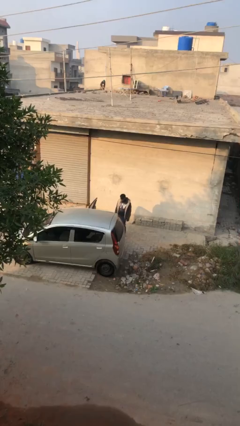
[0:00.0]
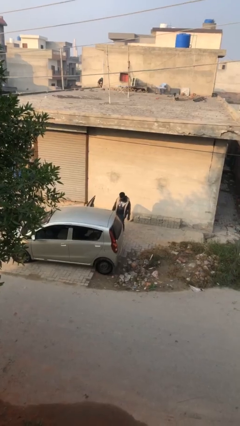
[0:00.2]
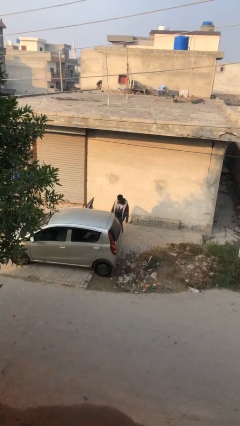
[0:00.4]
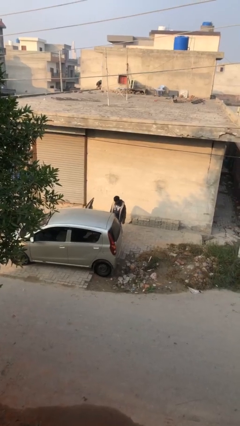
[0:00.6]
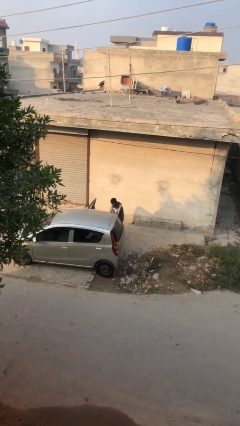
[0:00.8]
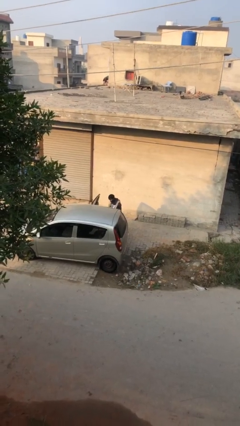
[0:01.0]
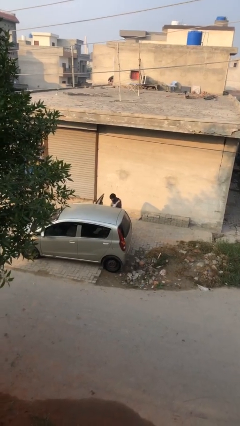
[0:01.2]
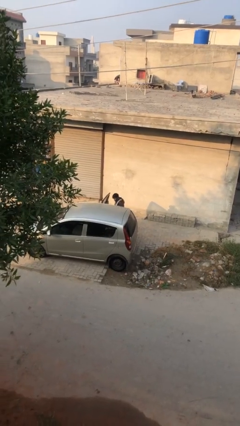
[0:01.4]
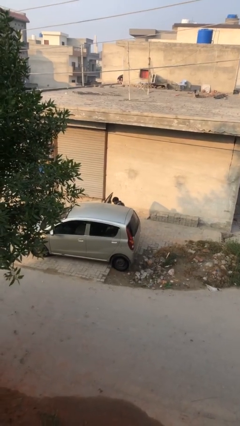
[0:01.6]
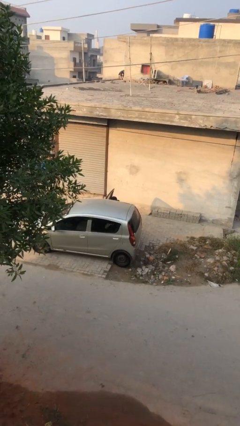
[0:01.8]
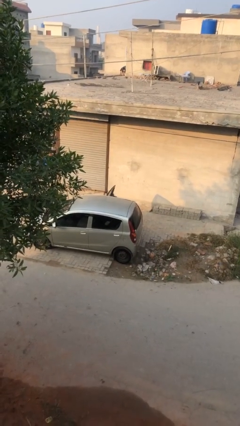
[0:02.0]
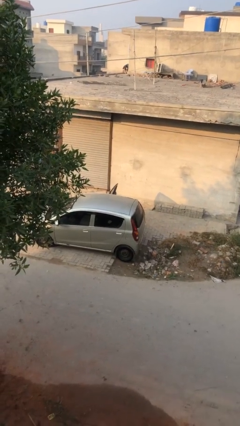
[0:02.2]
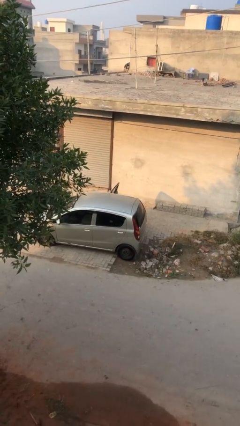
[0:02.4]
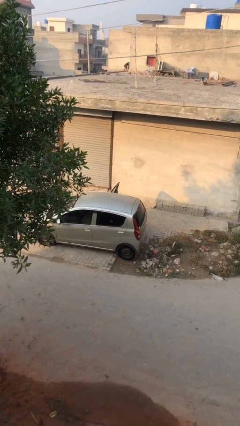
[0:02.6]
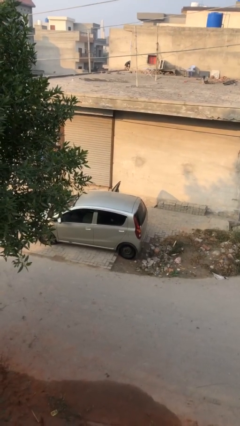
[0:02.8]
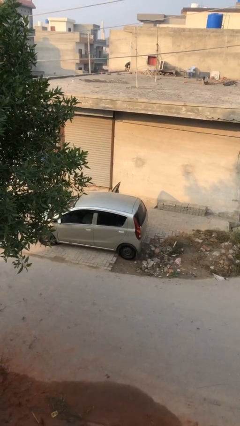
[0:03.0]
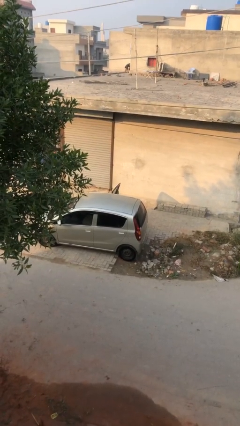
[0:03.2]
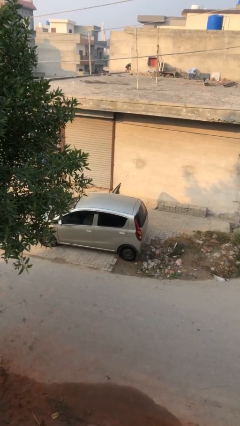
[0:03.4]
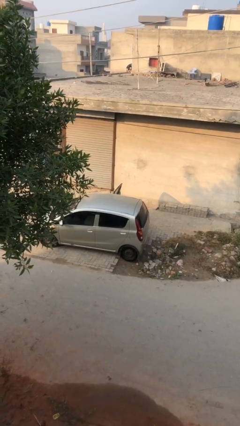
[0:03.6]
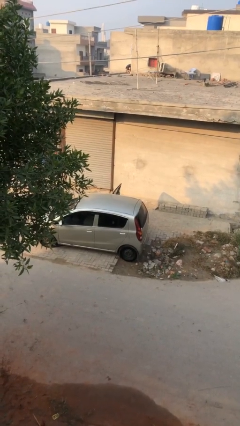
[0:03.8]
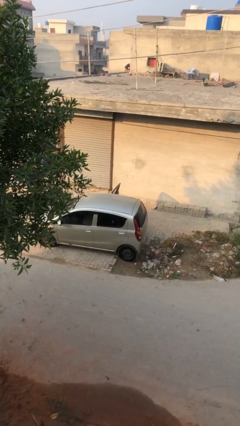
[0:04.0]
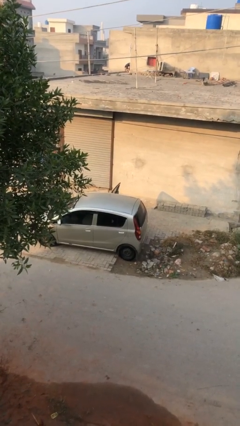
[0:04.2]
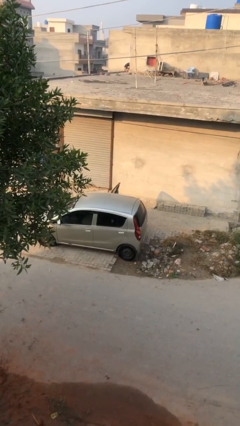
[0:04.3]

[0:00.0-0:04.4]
person enters car

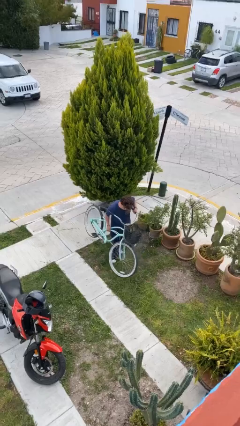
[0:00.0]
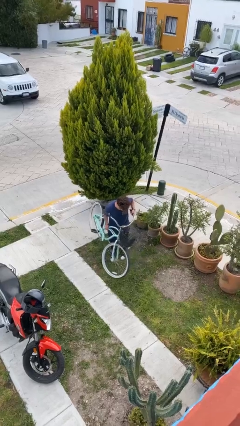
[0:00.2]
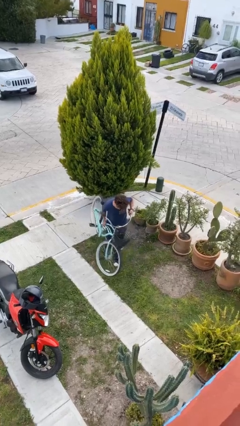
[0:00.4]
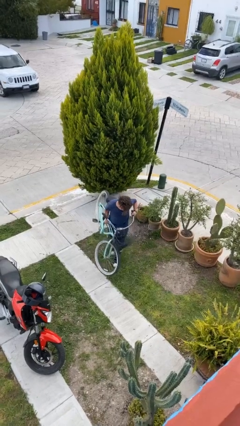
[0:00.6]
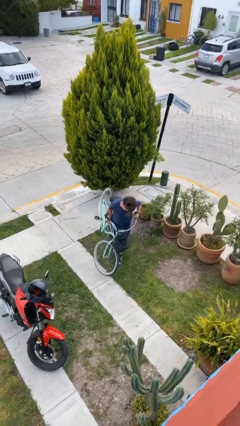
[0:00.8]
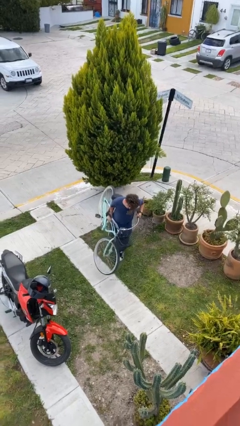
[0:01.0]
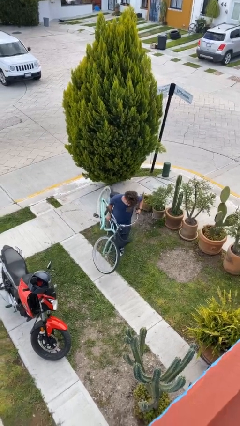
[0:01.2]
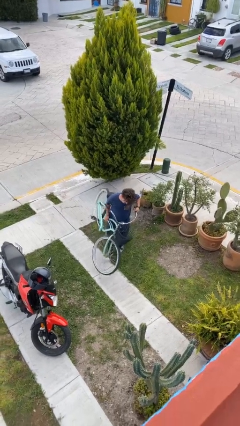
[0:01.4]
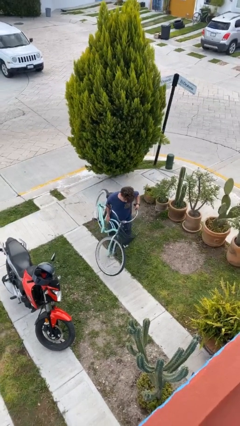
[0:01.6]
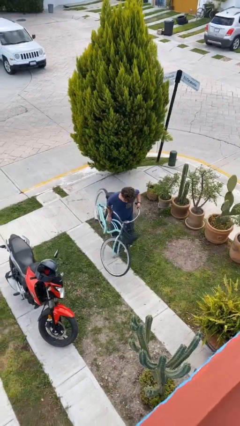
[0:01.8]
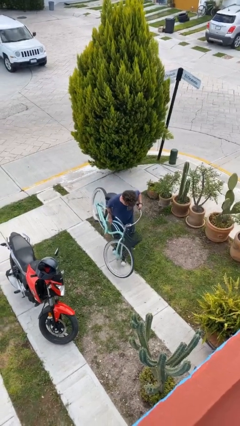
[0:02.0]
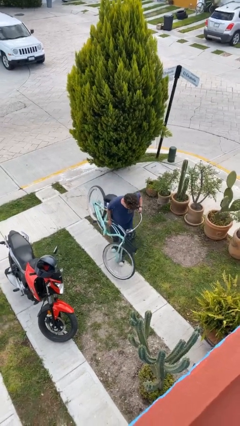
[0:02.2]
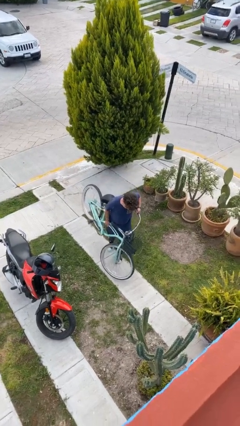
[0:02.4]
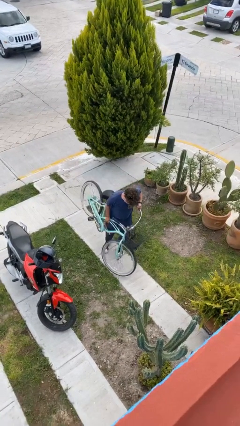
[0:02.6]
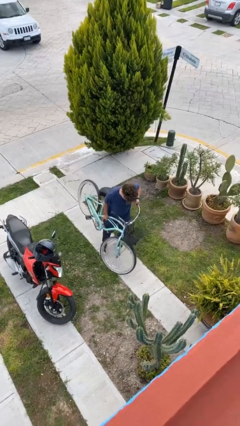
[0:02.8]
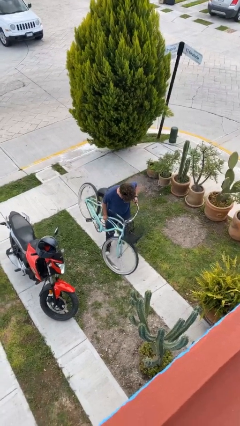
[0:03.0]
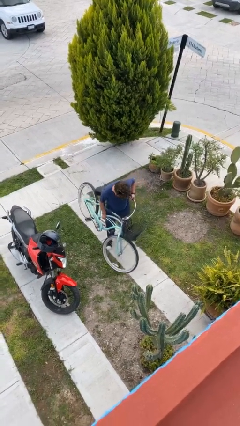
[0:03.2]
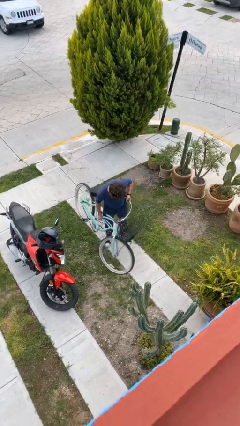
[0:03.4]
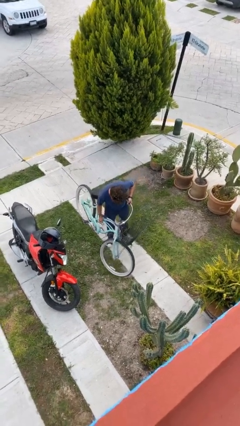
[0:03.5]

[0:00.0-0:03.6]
person carries heavy object

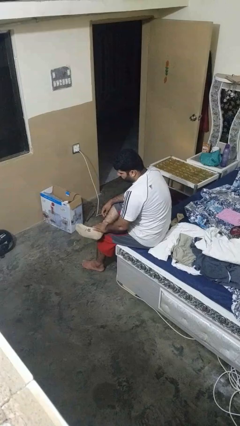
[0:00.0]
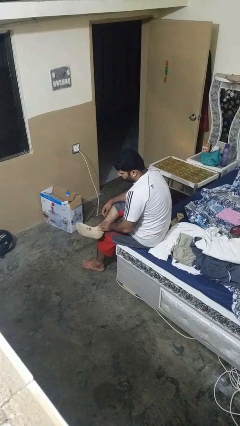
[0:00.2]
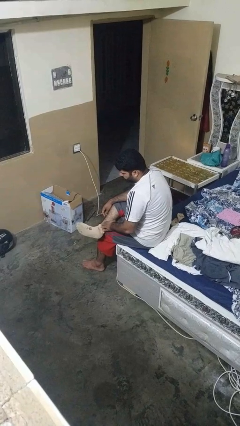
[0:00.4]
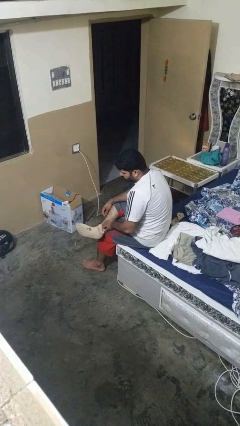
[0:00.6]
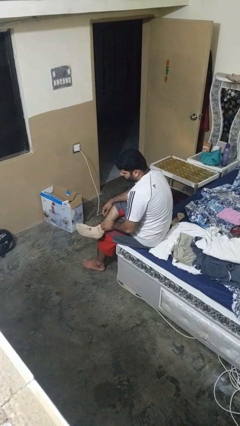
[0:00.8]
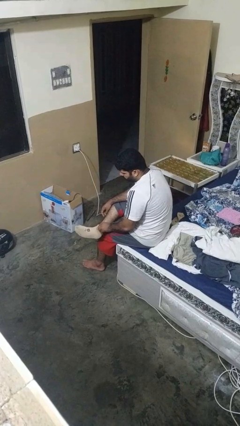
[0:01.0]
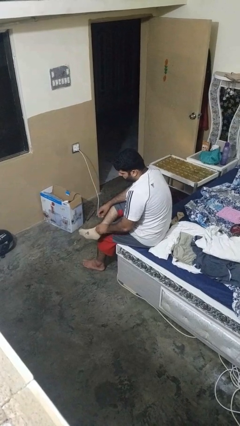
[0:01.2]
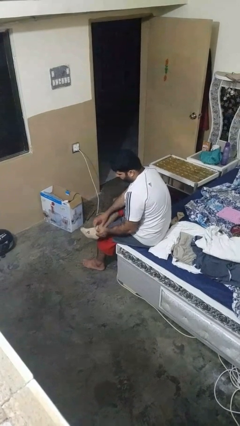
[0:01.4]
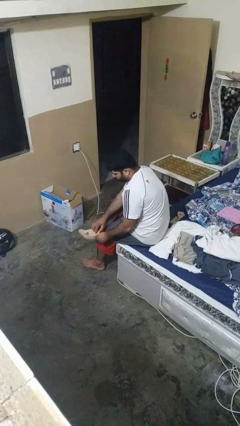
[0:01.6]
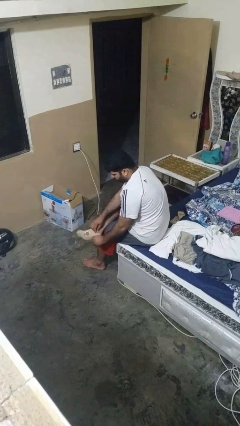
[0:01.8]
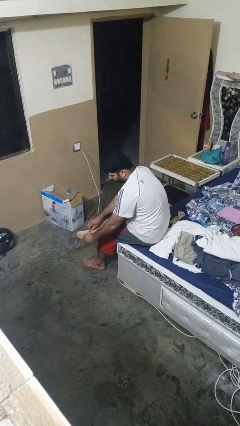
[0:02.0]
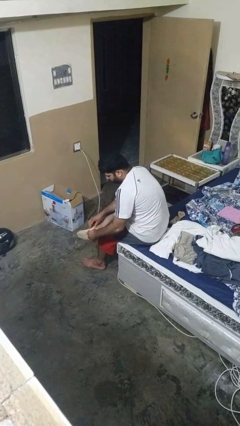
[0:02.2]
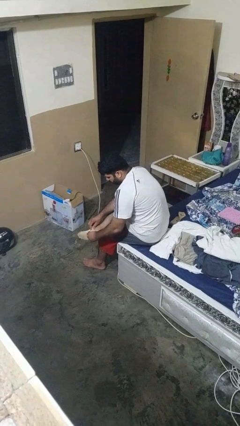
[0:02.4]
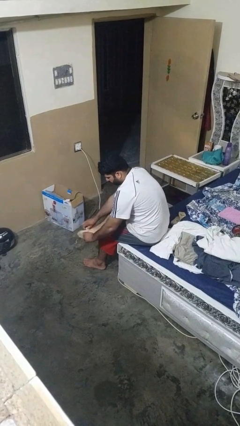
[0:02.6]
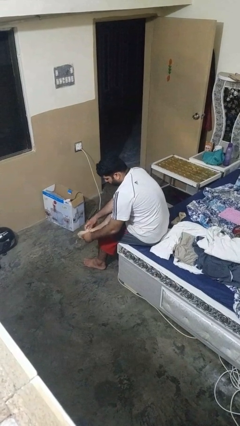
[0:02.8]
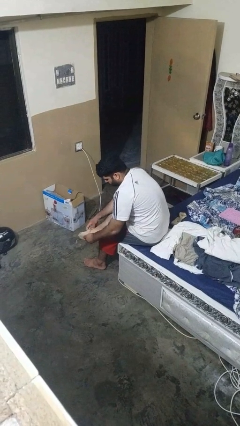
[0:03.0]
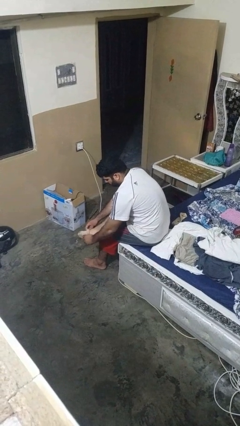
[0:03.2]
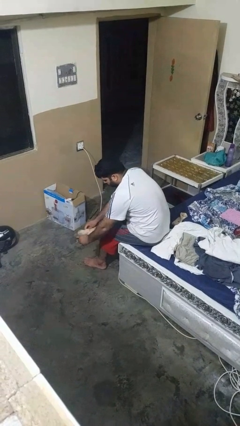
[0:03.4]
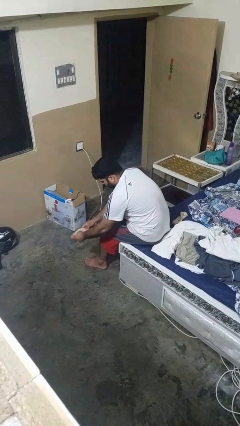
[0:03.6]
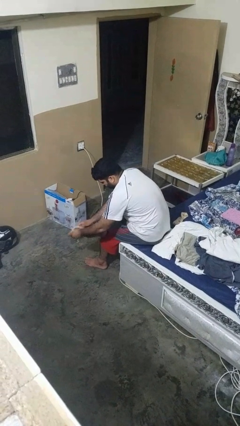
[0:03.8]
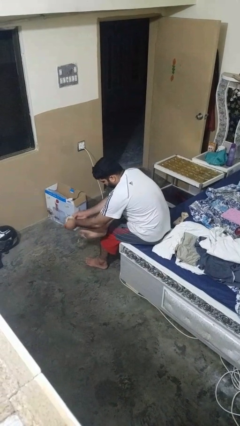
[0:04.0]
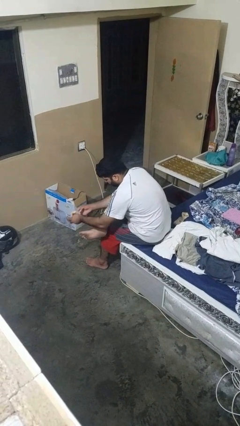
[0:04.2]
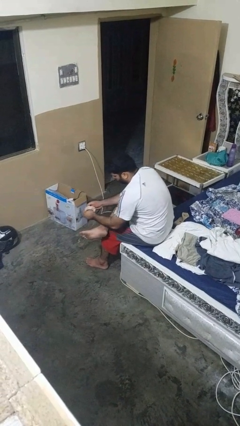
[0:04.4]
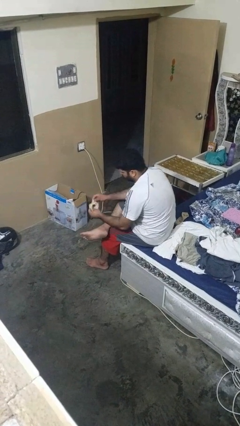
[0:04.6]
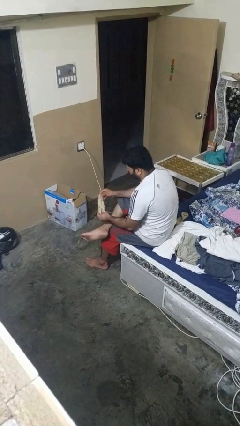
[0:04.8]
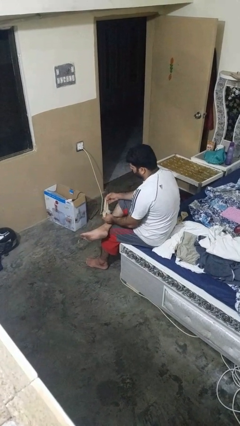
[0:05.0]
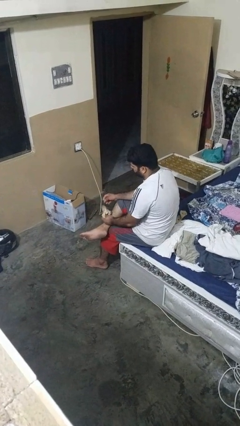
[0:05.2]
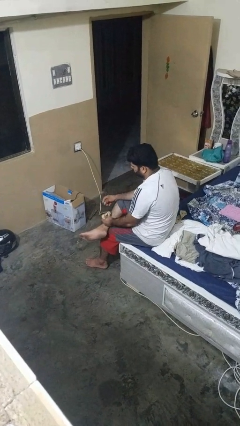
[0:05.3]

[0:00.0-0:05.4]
person takes off socks

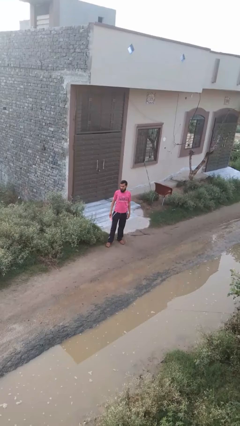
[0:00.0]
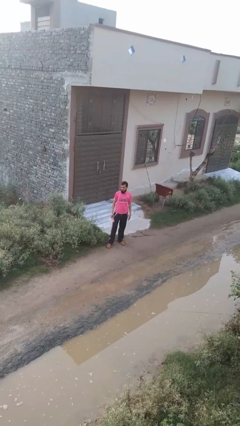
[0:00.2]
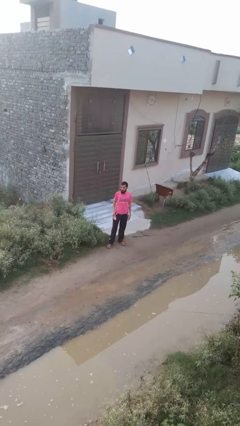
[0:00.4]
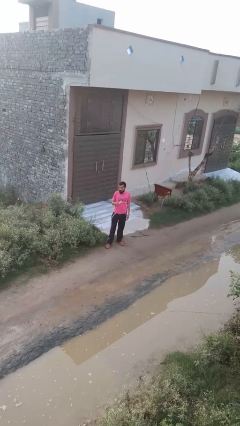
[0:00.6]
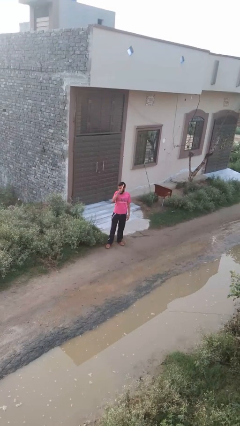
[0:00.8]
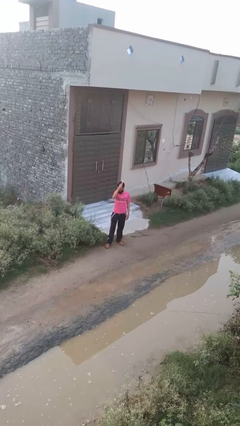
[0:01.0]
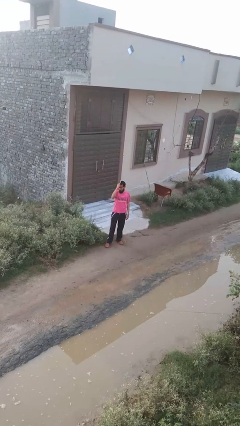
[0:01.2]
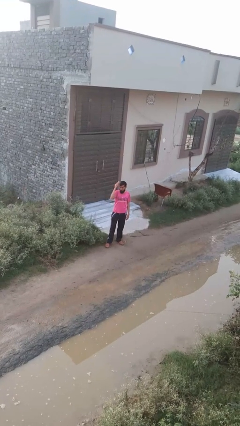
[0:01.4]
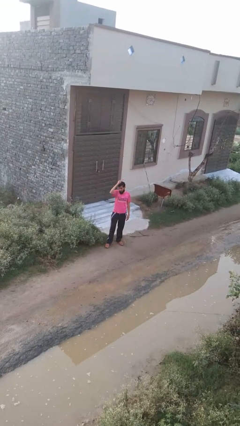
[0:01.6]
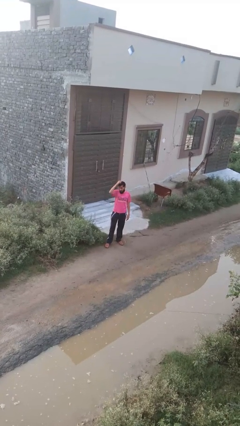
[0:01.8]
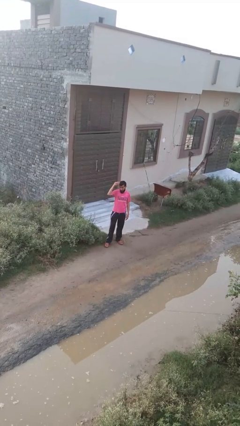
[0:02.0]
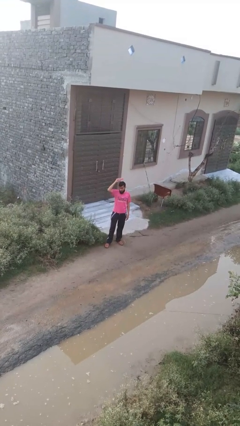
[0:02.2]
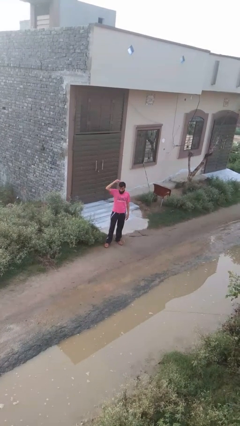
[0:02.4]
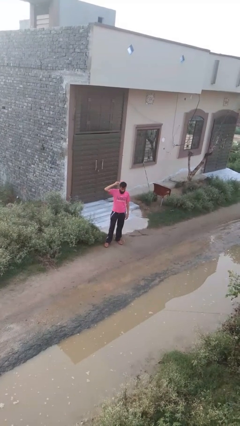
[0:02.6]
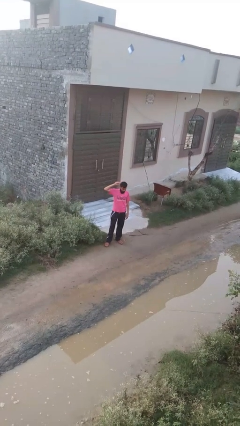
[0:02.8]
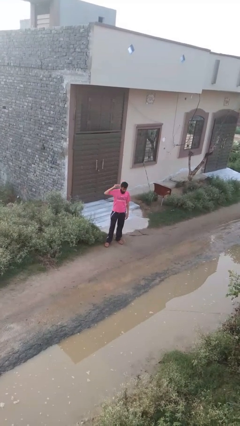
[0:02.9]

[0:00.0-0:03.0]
person brushes hair

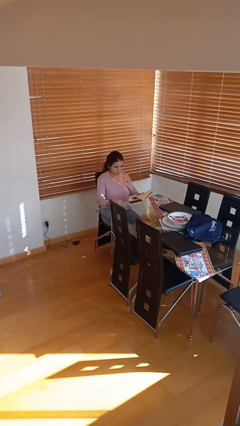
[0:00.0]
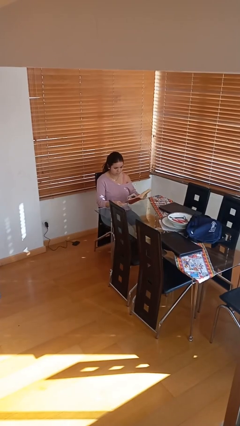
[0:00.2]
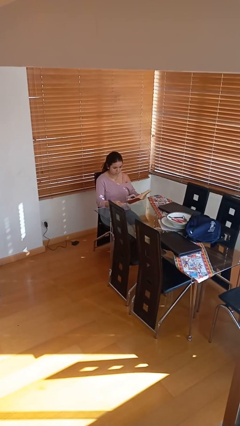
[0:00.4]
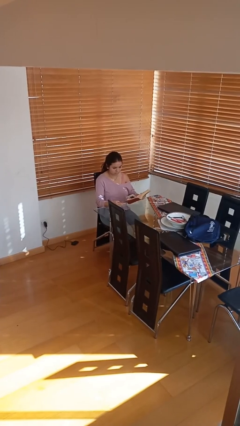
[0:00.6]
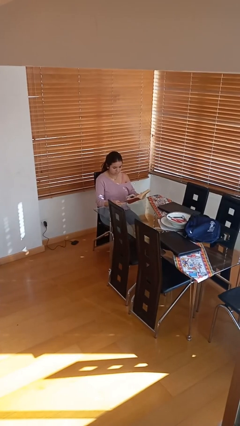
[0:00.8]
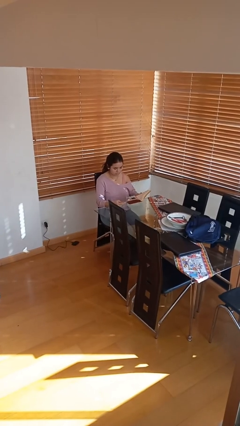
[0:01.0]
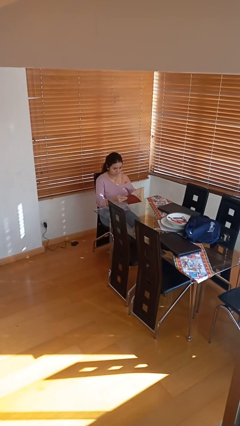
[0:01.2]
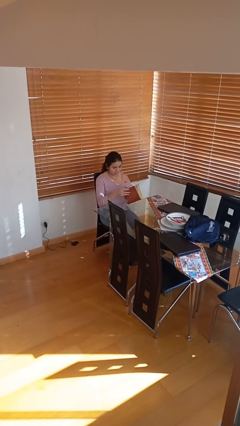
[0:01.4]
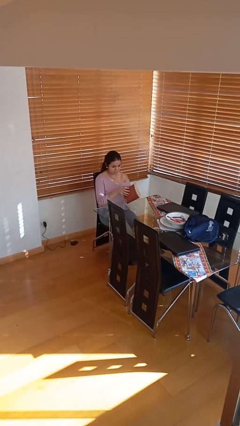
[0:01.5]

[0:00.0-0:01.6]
person reads document
